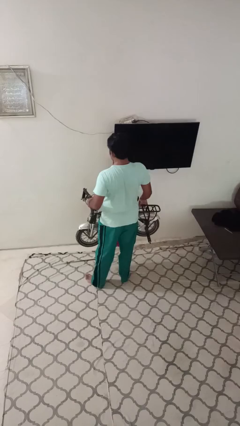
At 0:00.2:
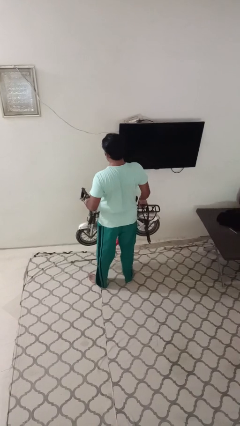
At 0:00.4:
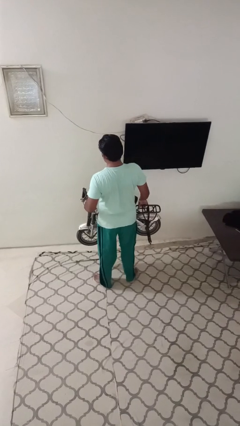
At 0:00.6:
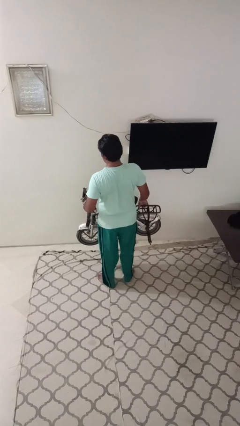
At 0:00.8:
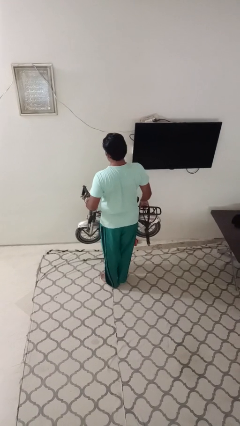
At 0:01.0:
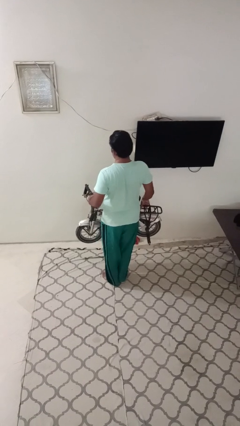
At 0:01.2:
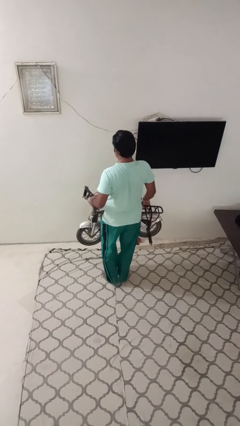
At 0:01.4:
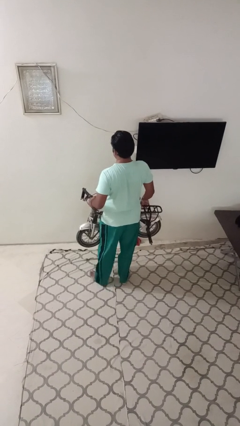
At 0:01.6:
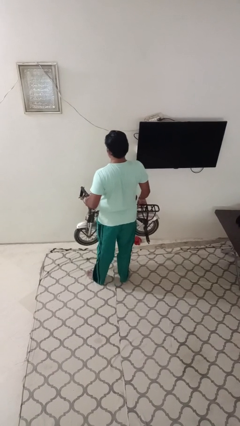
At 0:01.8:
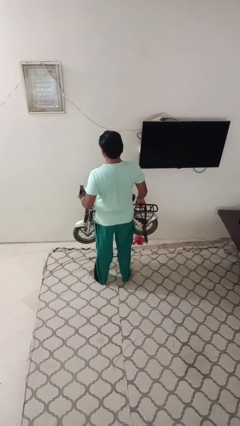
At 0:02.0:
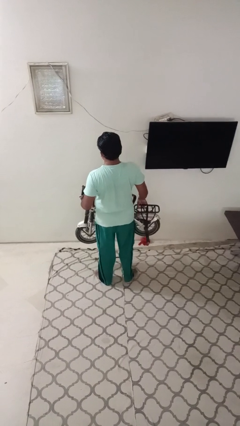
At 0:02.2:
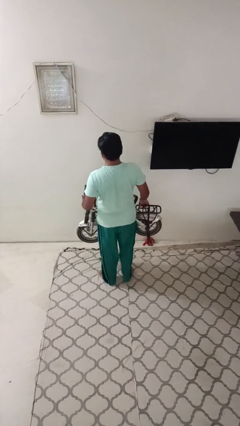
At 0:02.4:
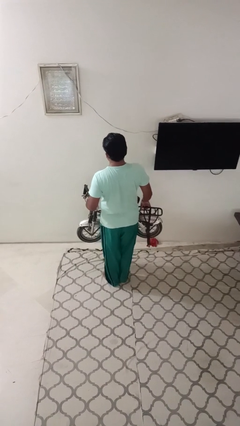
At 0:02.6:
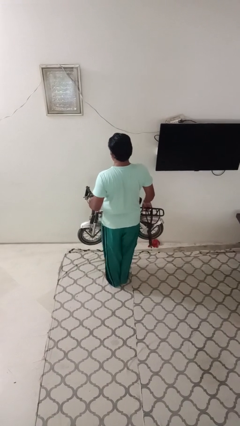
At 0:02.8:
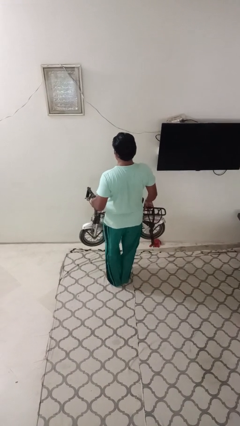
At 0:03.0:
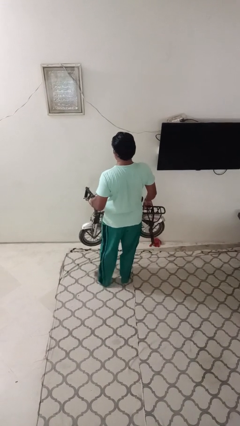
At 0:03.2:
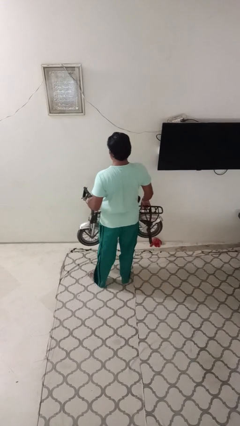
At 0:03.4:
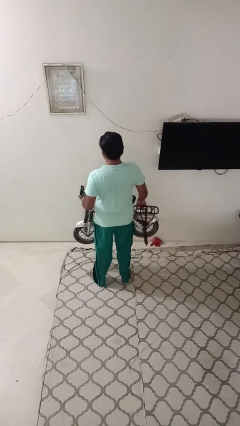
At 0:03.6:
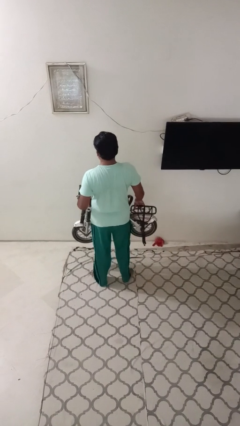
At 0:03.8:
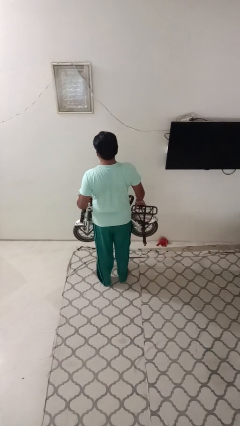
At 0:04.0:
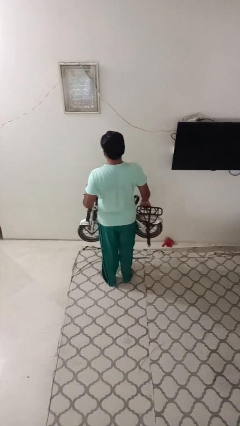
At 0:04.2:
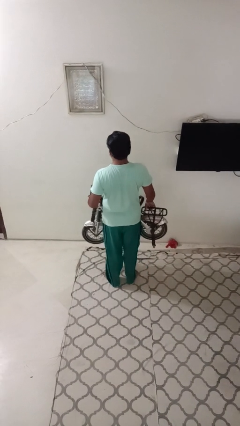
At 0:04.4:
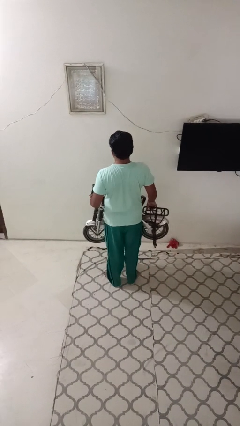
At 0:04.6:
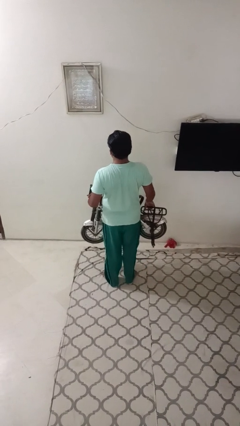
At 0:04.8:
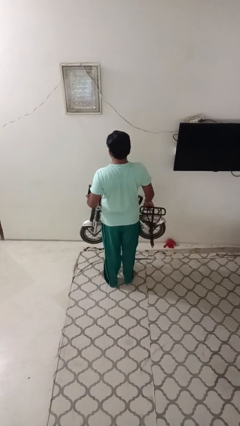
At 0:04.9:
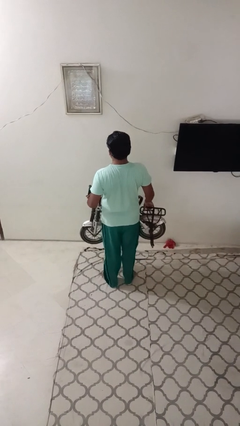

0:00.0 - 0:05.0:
person carries bicycle

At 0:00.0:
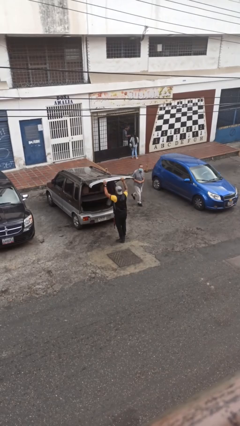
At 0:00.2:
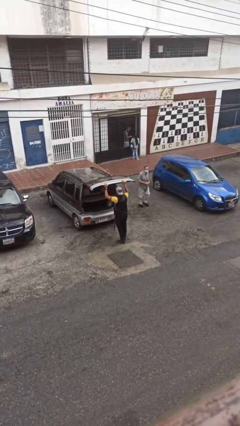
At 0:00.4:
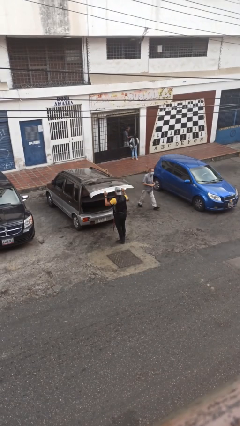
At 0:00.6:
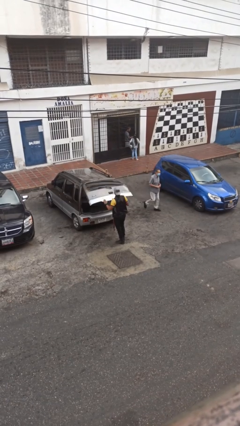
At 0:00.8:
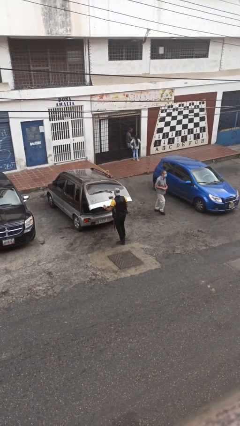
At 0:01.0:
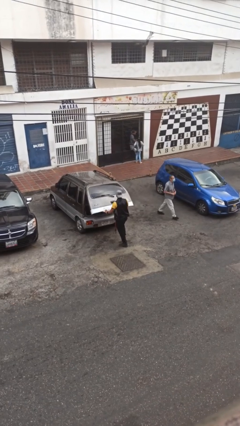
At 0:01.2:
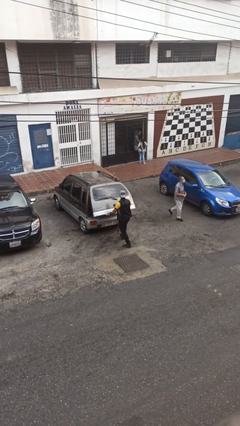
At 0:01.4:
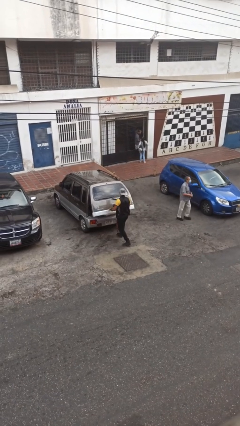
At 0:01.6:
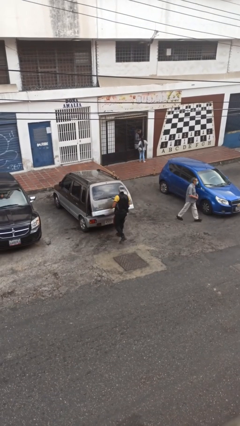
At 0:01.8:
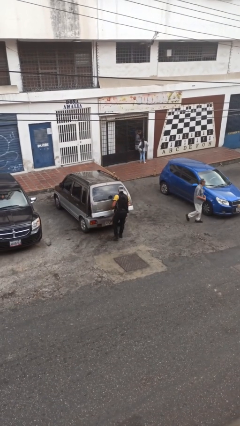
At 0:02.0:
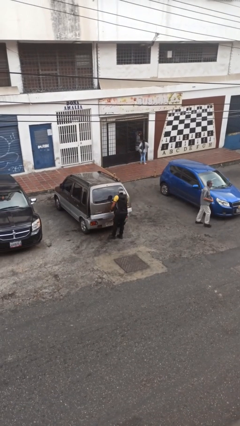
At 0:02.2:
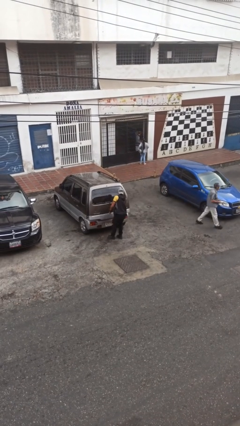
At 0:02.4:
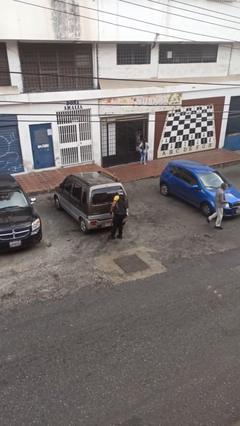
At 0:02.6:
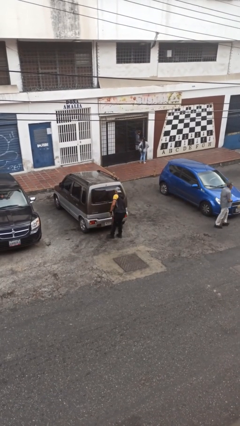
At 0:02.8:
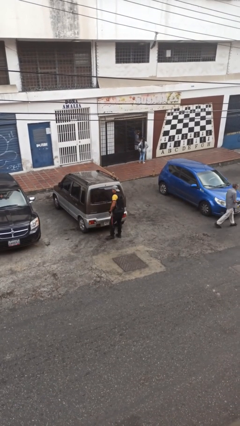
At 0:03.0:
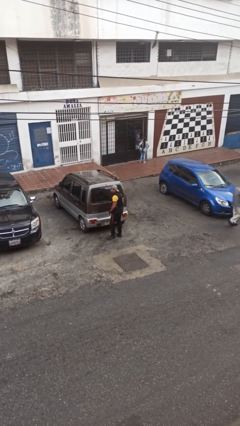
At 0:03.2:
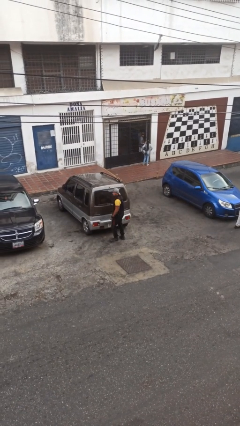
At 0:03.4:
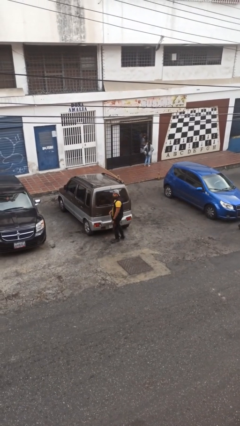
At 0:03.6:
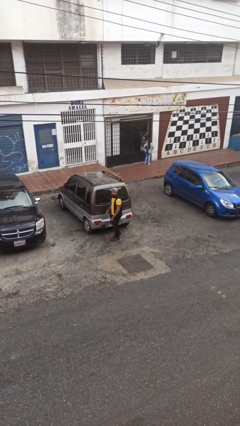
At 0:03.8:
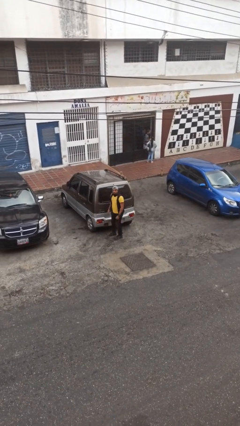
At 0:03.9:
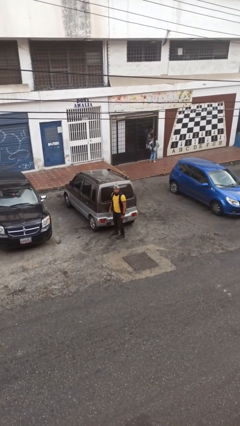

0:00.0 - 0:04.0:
person closes car trunk

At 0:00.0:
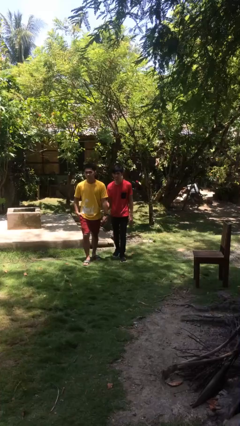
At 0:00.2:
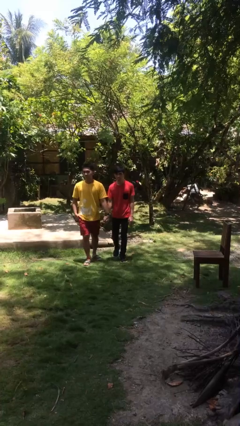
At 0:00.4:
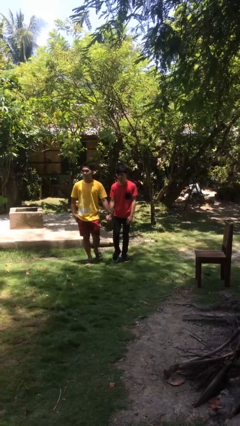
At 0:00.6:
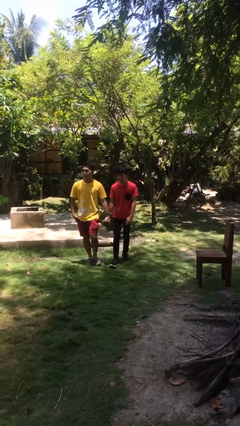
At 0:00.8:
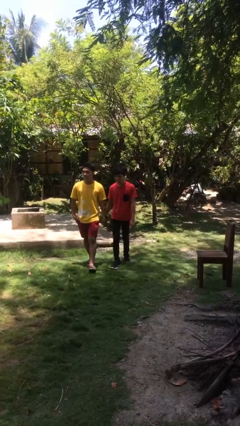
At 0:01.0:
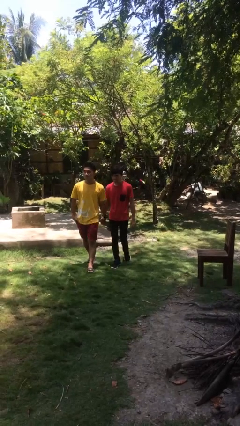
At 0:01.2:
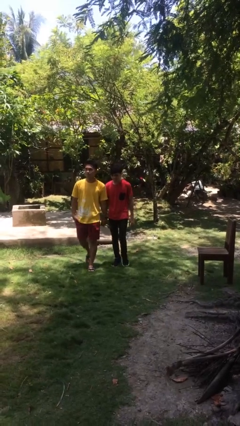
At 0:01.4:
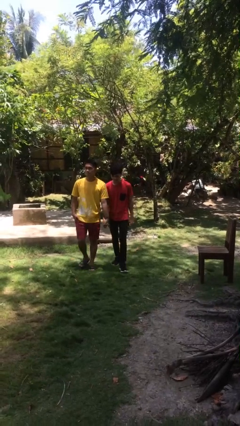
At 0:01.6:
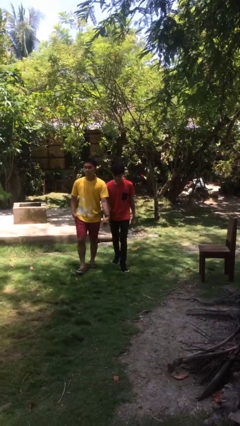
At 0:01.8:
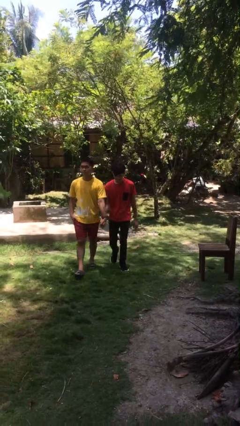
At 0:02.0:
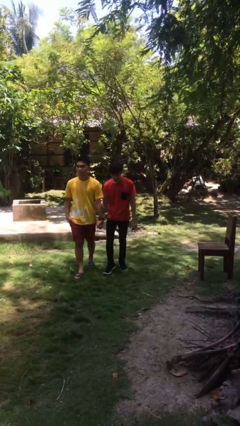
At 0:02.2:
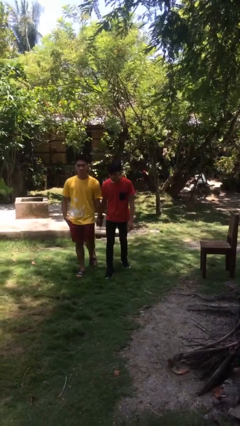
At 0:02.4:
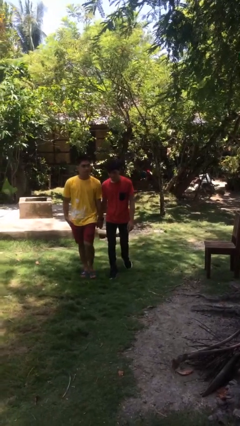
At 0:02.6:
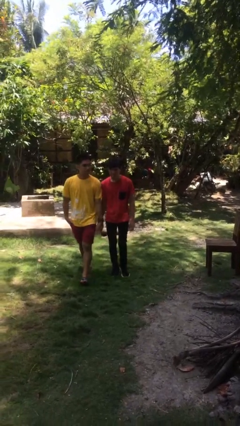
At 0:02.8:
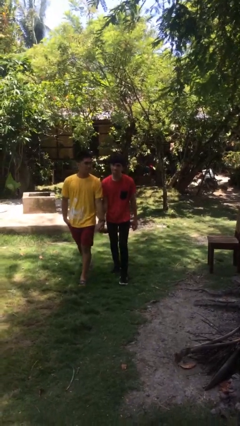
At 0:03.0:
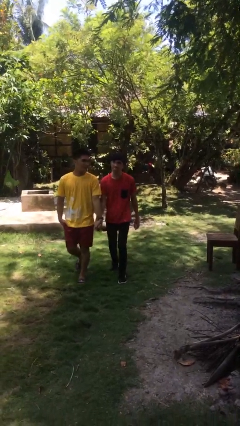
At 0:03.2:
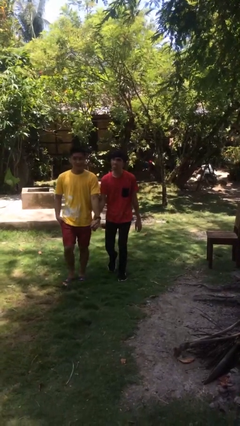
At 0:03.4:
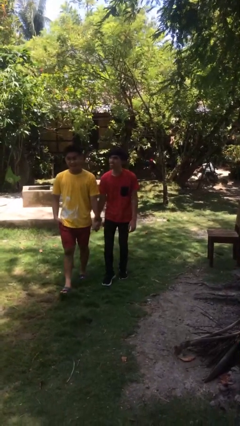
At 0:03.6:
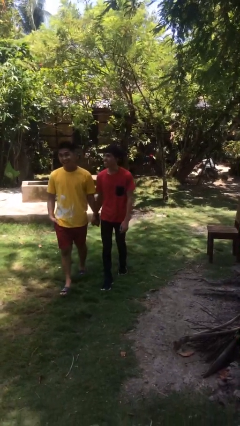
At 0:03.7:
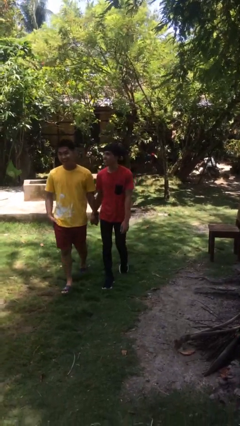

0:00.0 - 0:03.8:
person holds hand

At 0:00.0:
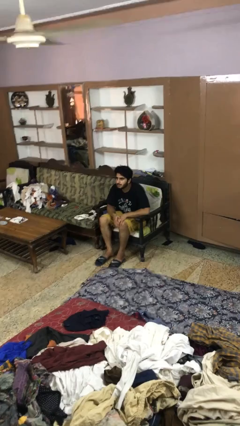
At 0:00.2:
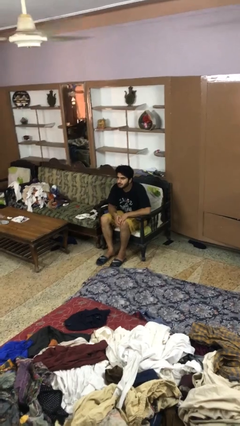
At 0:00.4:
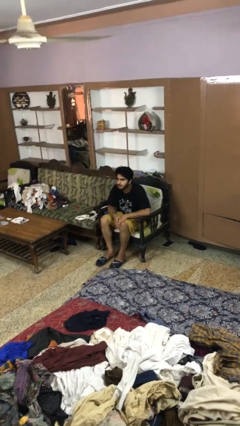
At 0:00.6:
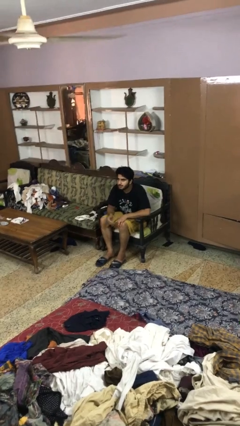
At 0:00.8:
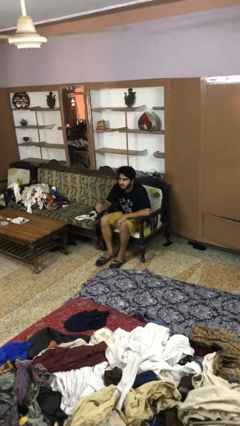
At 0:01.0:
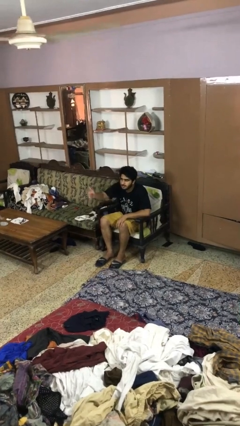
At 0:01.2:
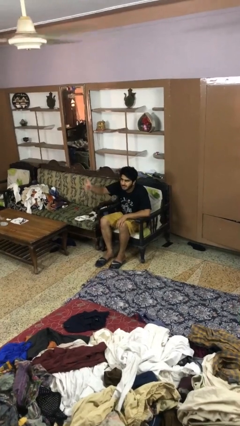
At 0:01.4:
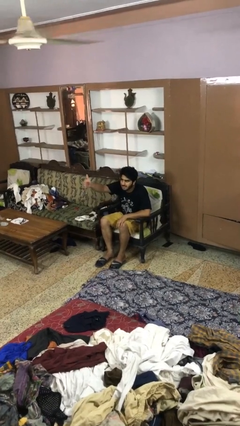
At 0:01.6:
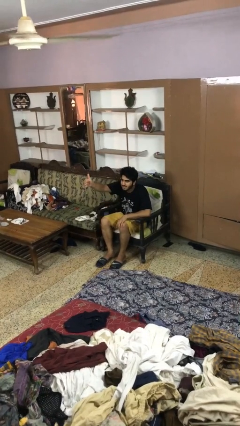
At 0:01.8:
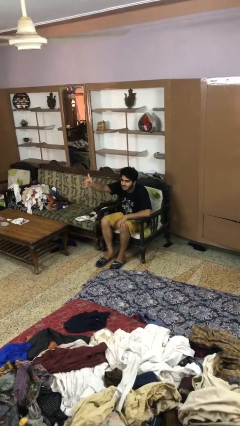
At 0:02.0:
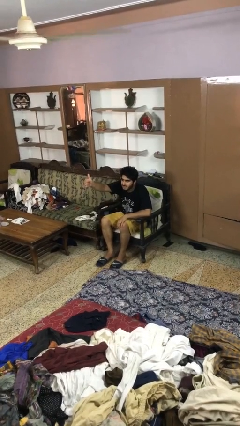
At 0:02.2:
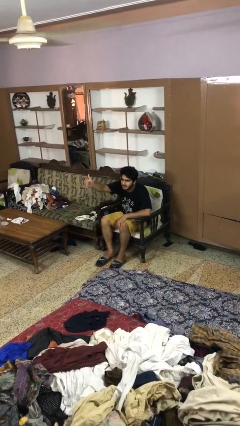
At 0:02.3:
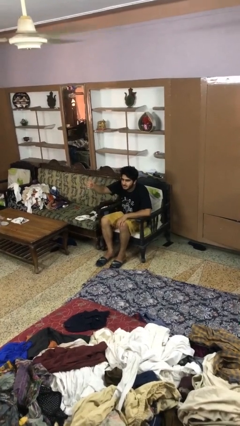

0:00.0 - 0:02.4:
person gestures thumbs up

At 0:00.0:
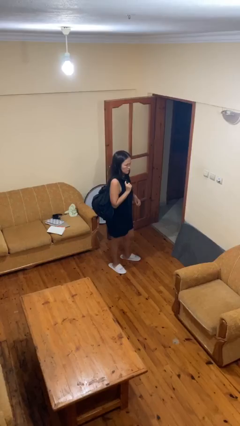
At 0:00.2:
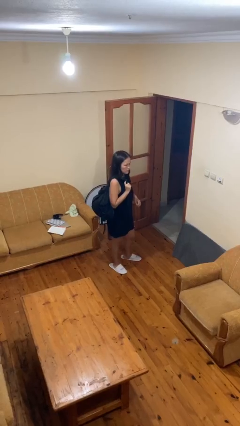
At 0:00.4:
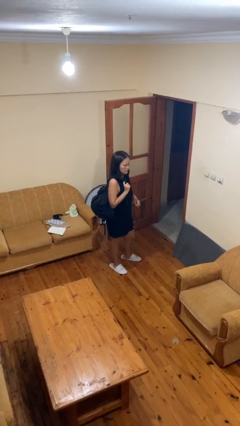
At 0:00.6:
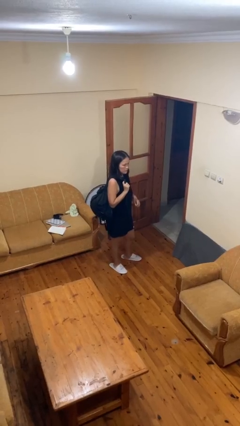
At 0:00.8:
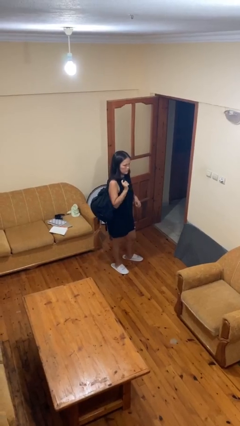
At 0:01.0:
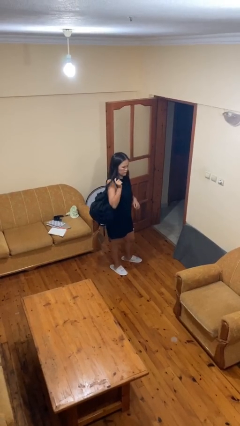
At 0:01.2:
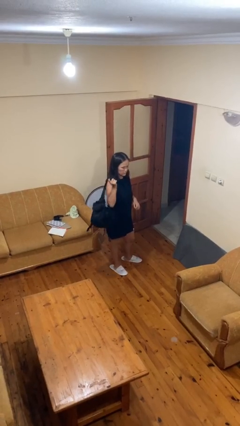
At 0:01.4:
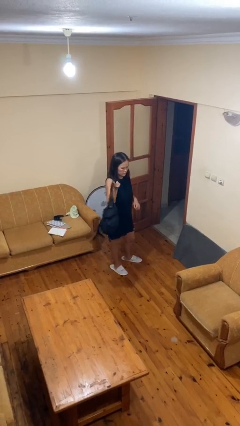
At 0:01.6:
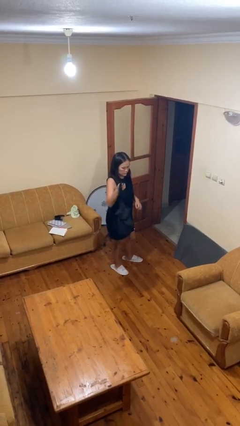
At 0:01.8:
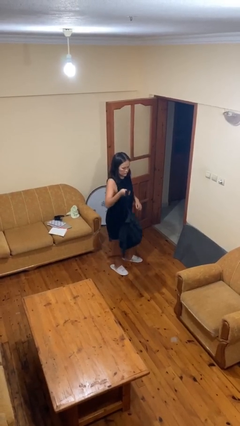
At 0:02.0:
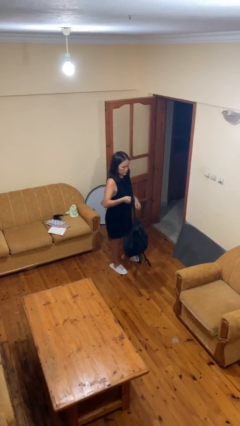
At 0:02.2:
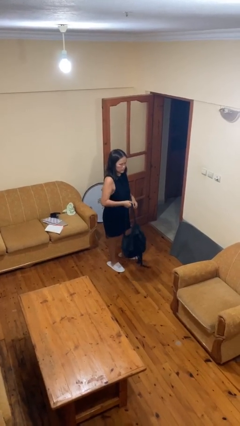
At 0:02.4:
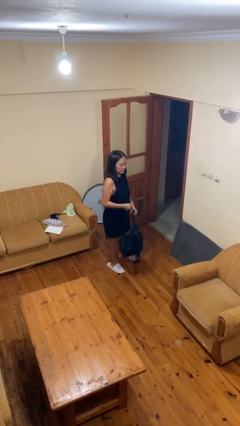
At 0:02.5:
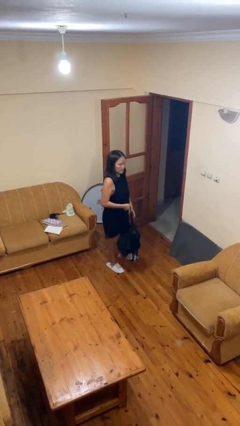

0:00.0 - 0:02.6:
person takes off backpack
